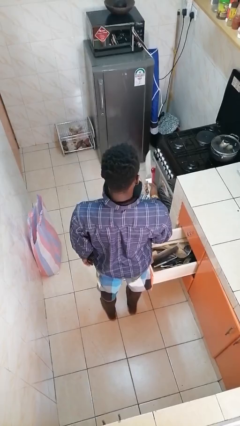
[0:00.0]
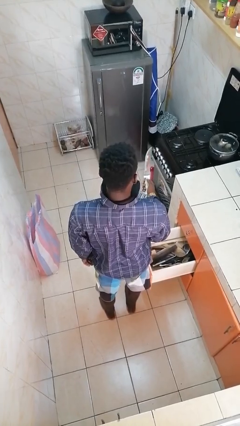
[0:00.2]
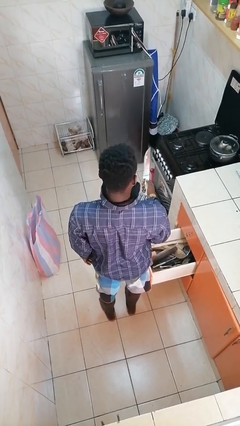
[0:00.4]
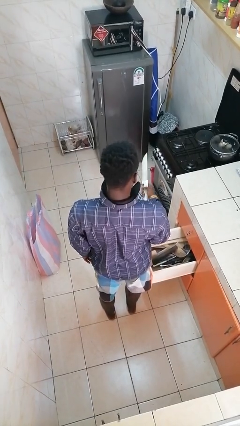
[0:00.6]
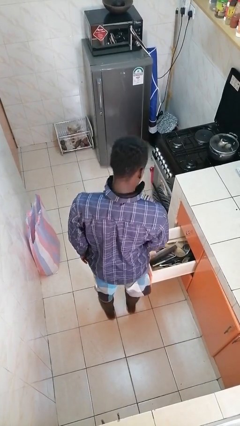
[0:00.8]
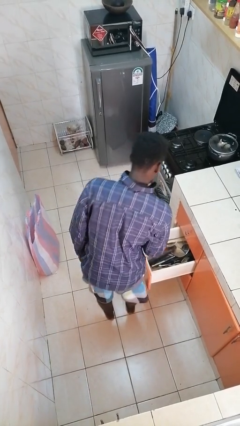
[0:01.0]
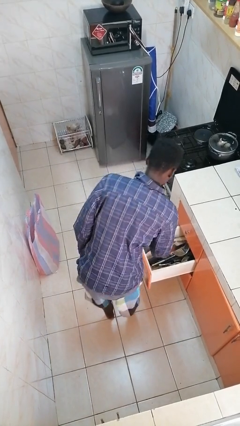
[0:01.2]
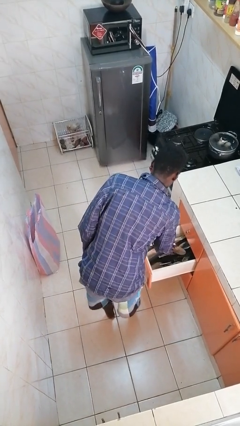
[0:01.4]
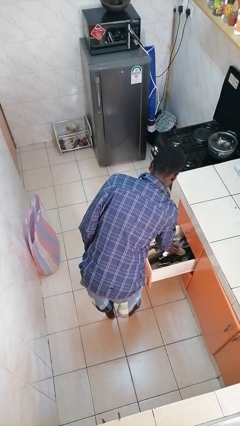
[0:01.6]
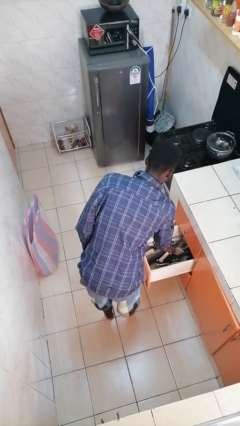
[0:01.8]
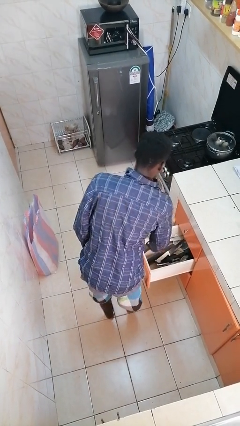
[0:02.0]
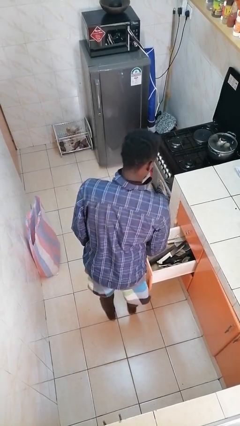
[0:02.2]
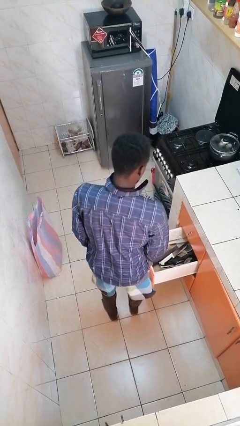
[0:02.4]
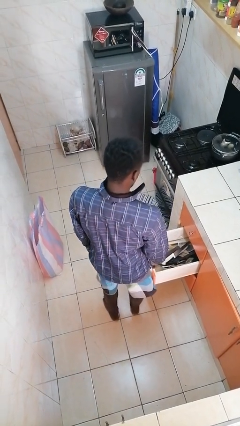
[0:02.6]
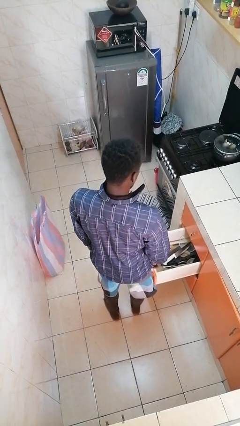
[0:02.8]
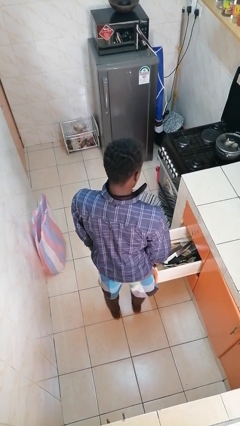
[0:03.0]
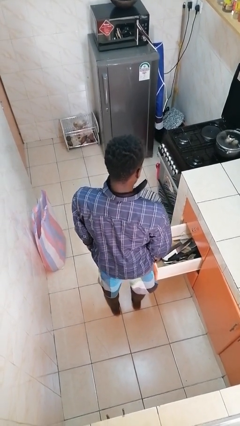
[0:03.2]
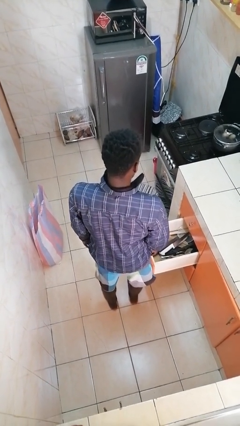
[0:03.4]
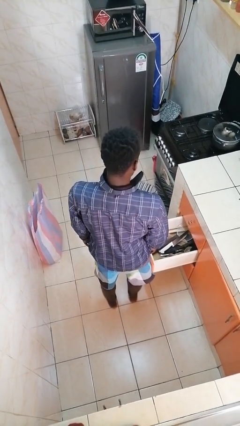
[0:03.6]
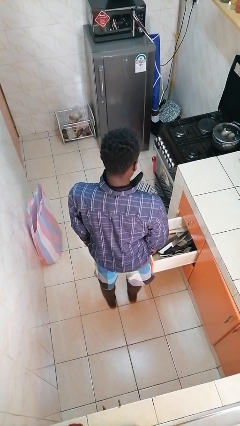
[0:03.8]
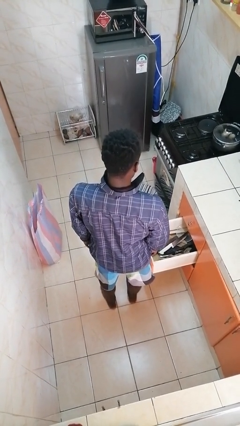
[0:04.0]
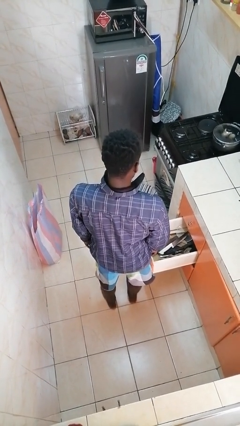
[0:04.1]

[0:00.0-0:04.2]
person puts object into kitchen drawer

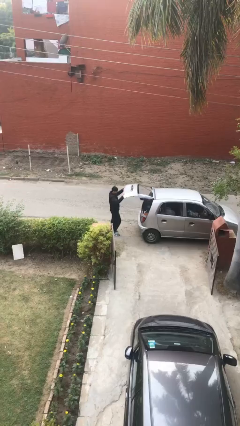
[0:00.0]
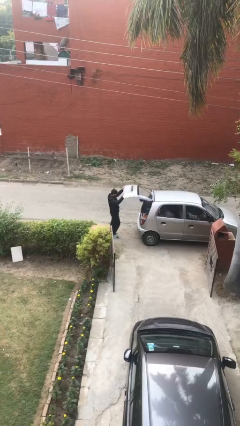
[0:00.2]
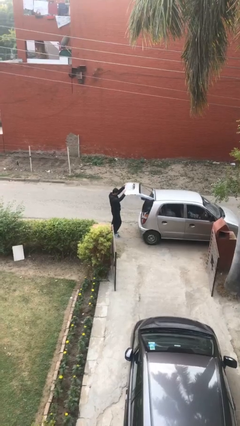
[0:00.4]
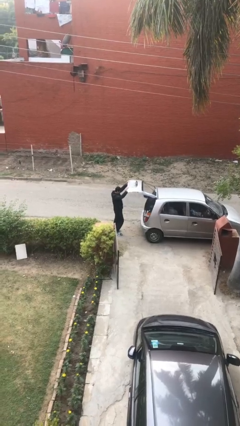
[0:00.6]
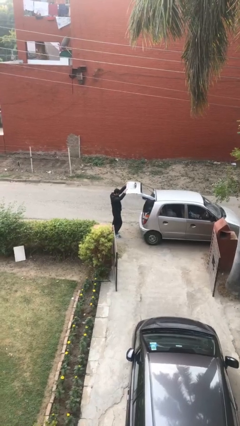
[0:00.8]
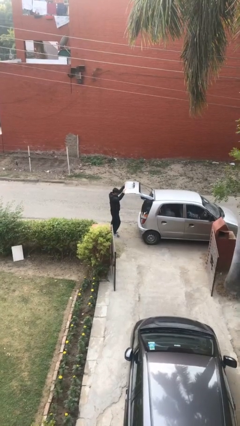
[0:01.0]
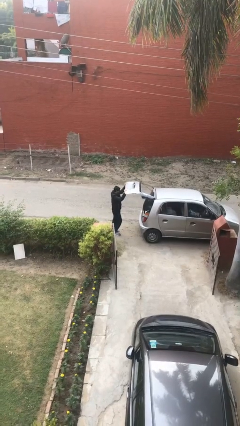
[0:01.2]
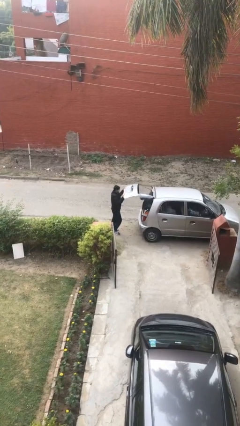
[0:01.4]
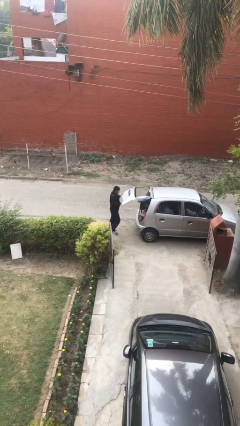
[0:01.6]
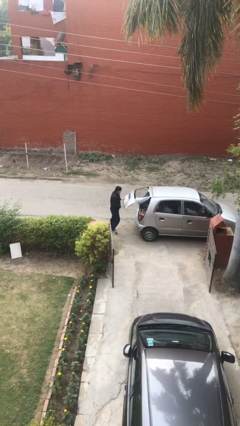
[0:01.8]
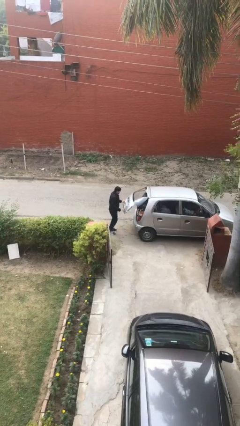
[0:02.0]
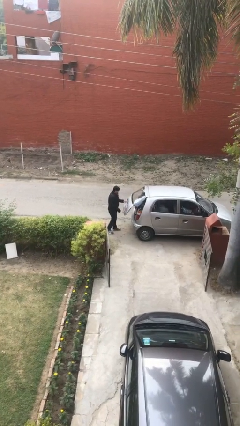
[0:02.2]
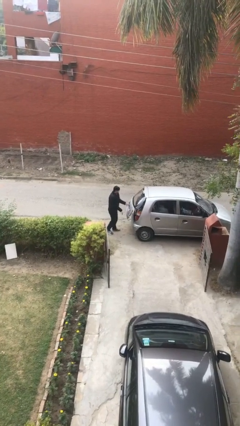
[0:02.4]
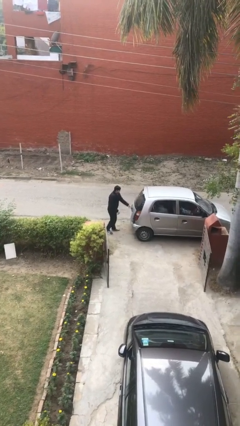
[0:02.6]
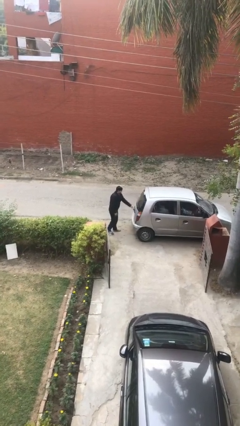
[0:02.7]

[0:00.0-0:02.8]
person closes car trunk

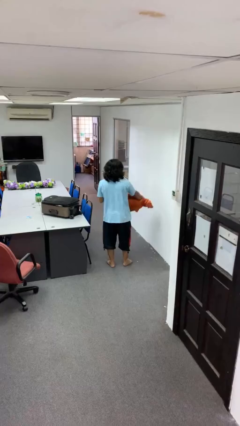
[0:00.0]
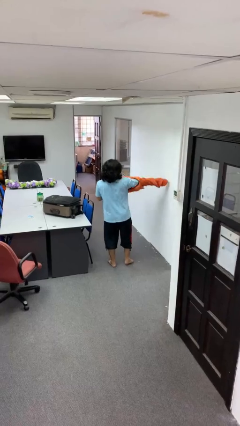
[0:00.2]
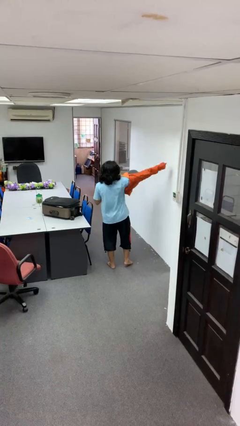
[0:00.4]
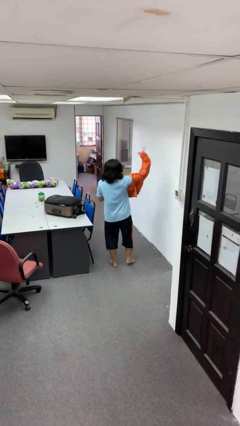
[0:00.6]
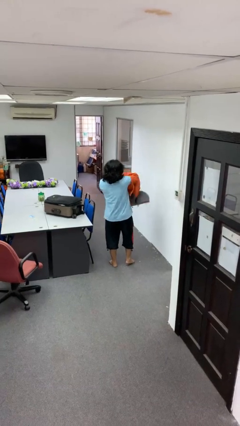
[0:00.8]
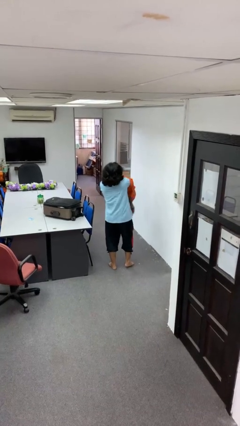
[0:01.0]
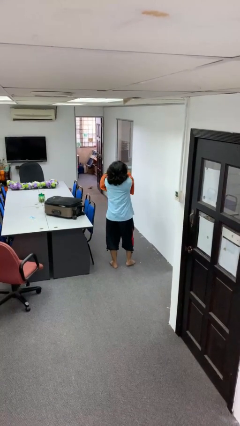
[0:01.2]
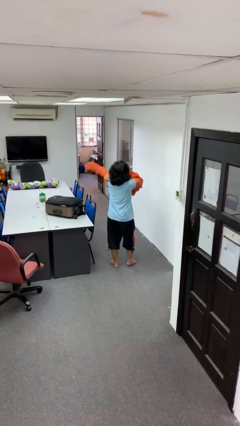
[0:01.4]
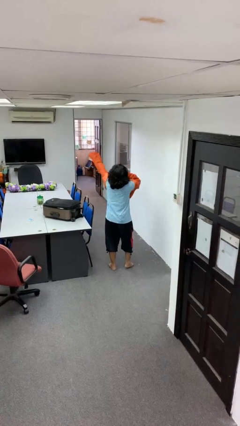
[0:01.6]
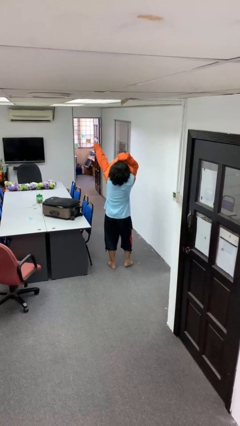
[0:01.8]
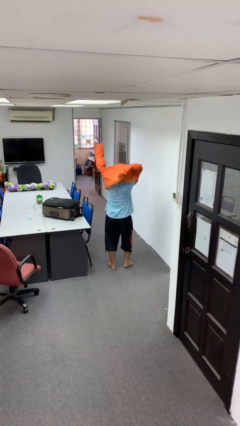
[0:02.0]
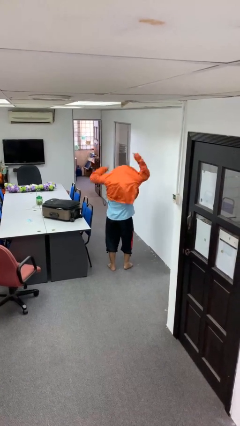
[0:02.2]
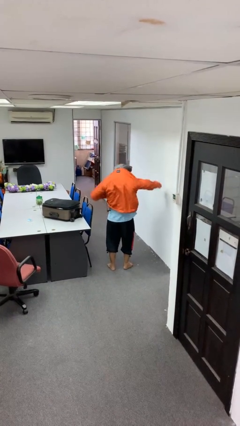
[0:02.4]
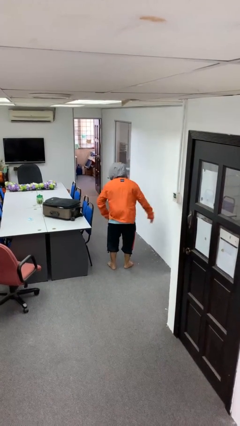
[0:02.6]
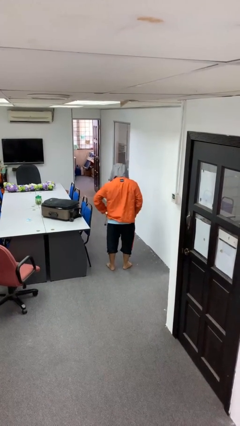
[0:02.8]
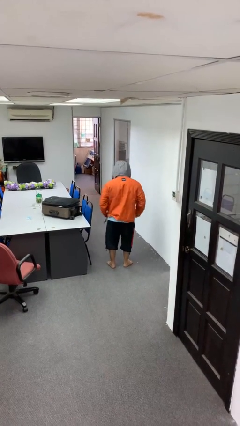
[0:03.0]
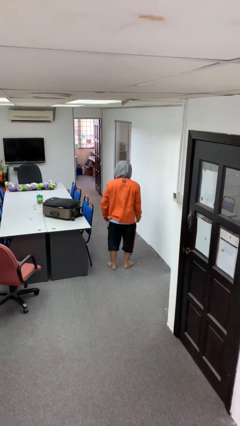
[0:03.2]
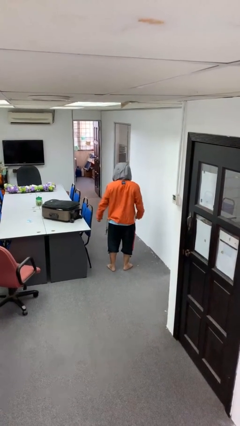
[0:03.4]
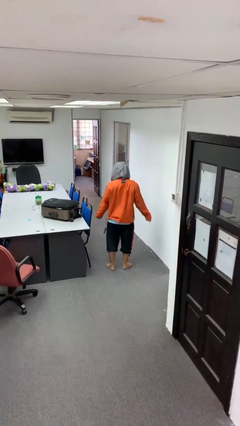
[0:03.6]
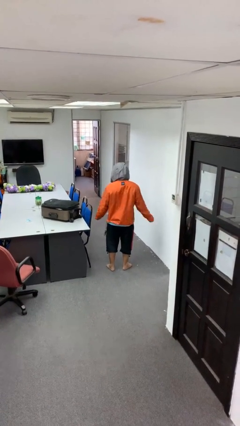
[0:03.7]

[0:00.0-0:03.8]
person puts on hoodie

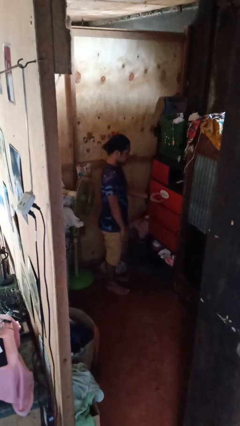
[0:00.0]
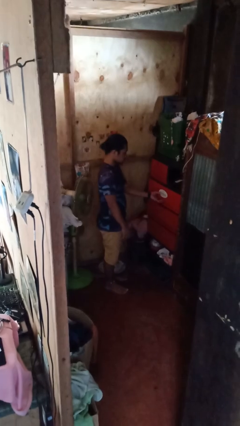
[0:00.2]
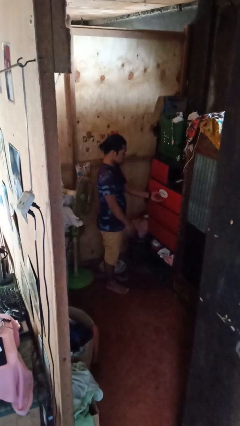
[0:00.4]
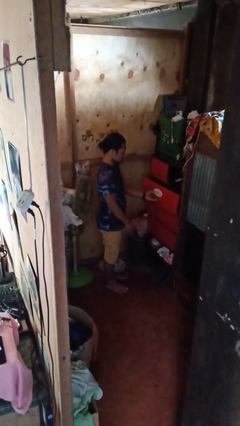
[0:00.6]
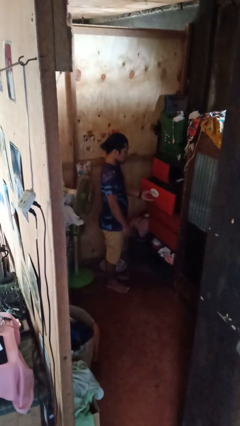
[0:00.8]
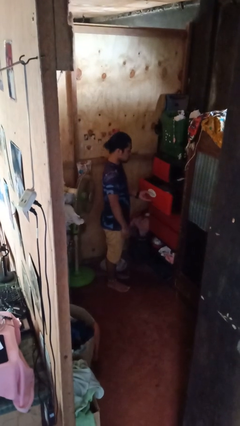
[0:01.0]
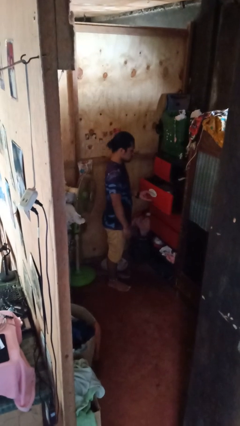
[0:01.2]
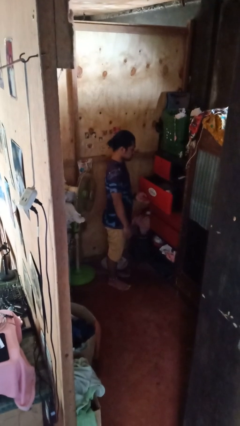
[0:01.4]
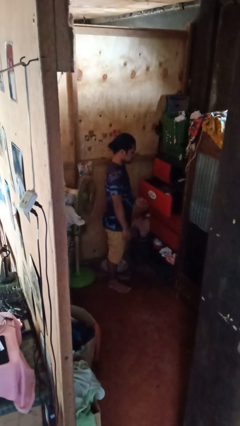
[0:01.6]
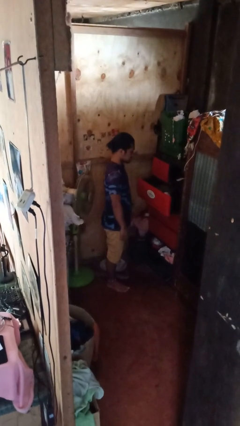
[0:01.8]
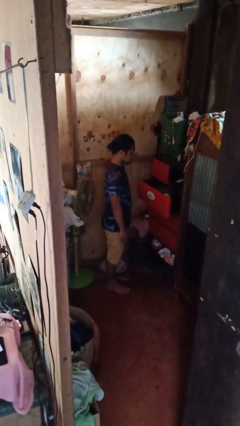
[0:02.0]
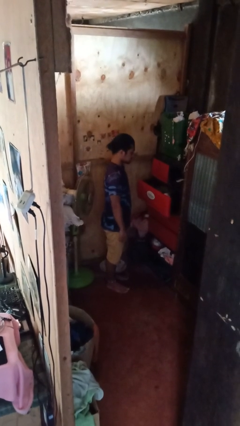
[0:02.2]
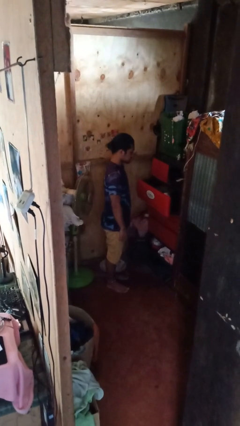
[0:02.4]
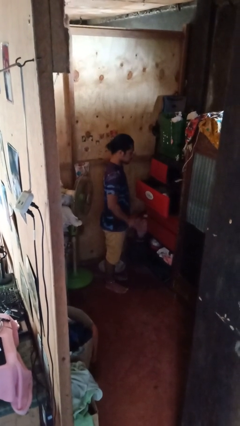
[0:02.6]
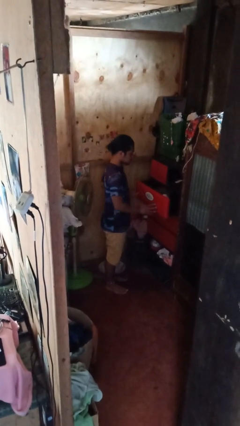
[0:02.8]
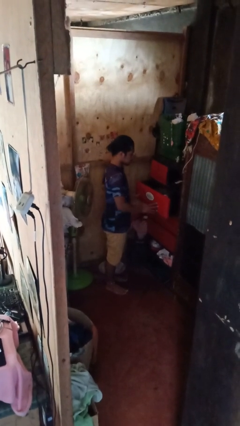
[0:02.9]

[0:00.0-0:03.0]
person opens dresser drawer

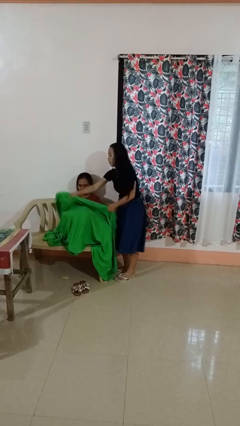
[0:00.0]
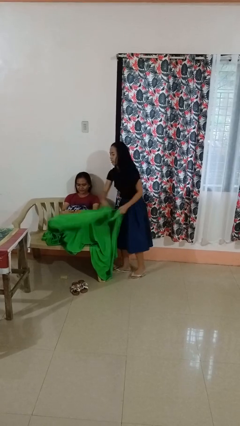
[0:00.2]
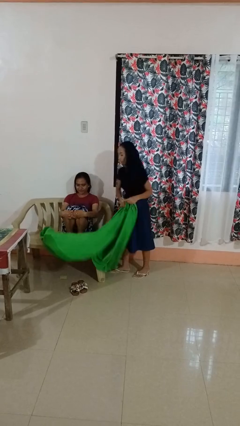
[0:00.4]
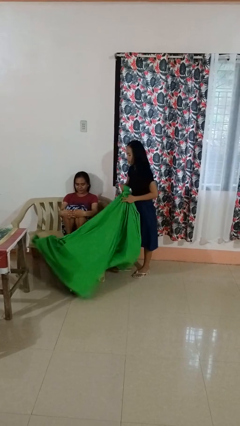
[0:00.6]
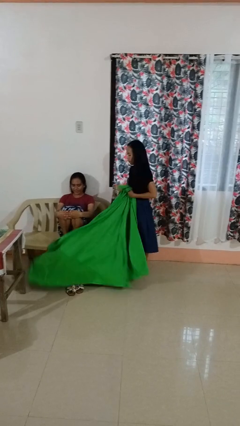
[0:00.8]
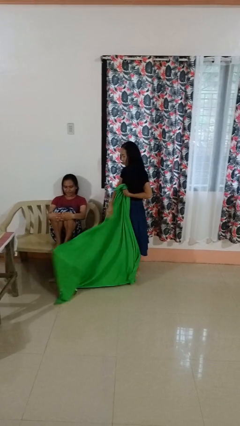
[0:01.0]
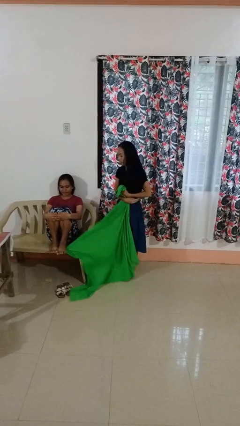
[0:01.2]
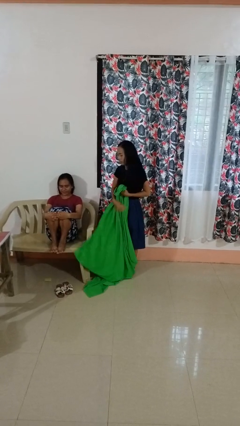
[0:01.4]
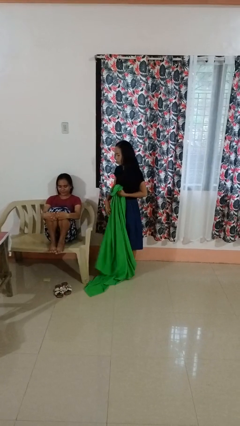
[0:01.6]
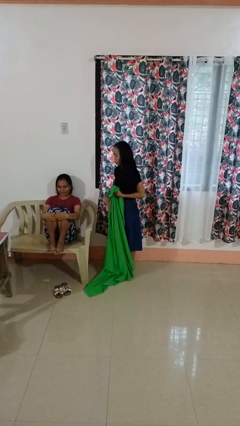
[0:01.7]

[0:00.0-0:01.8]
person uncovers friend with blanket

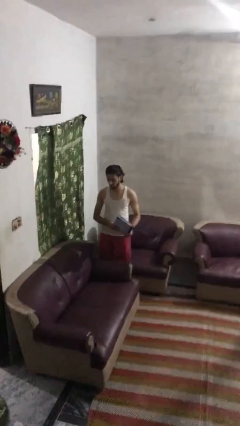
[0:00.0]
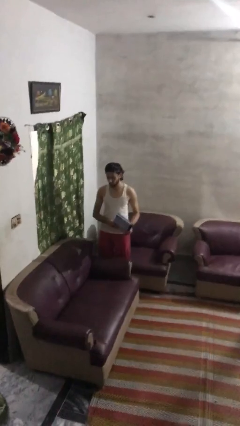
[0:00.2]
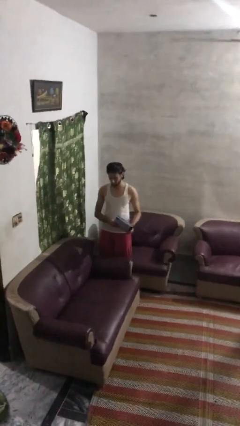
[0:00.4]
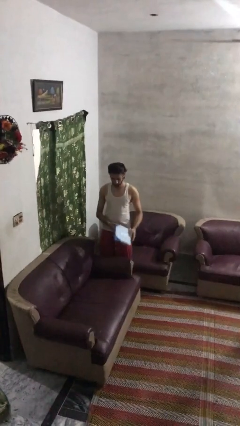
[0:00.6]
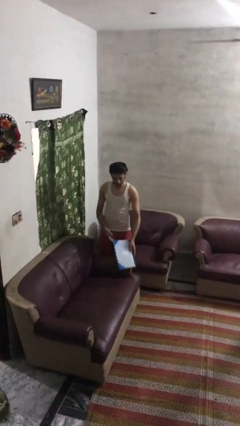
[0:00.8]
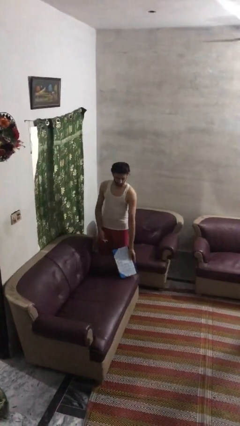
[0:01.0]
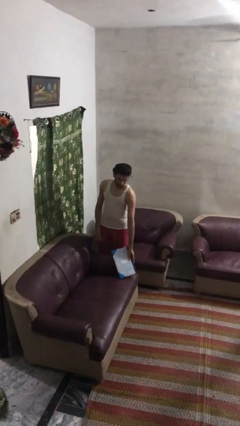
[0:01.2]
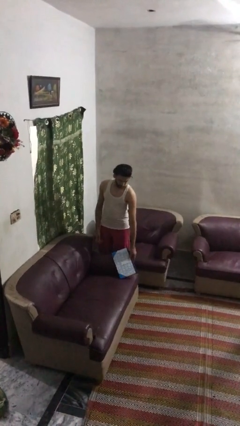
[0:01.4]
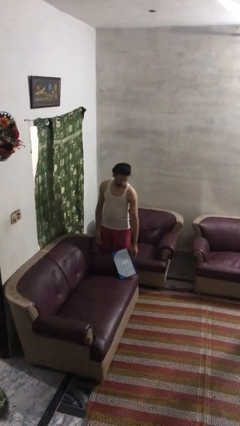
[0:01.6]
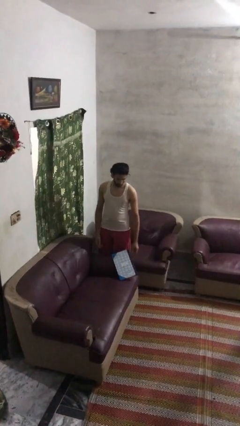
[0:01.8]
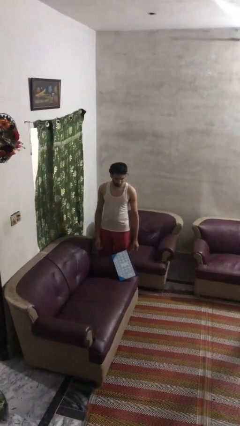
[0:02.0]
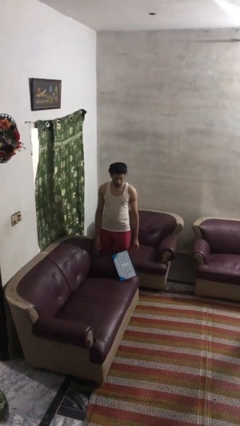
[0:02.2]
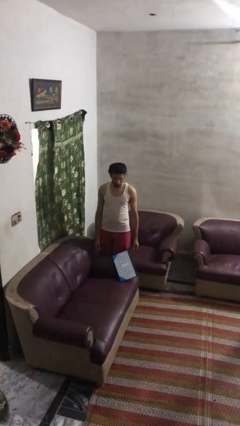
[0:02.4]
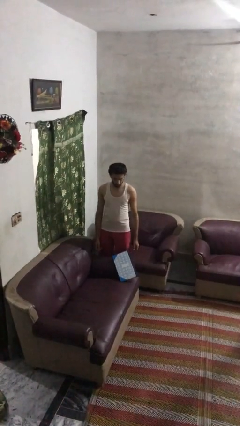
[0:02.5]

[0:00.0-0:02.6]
person puts down object on couch
